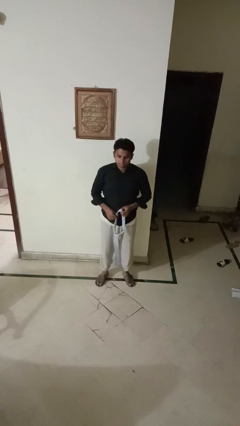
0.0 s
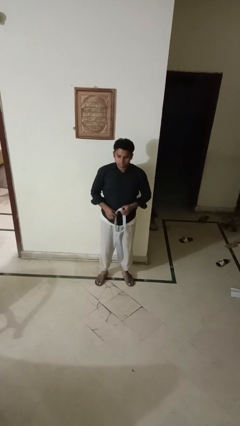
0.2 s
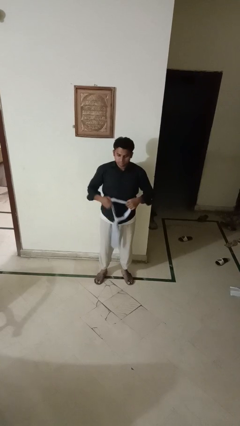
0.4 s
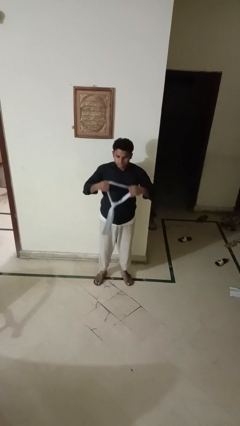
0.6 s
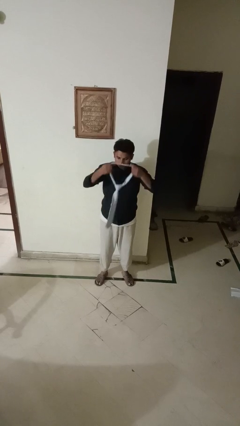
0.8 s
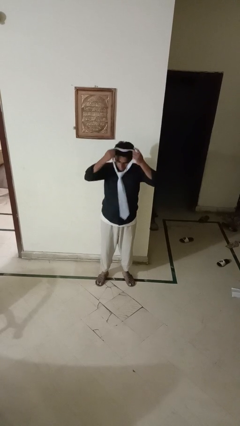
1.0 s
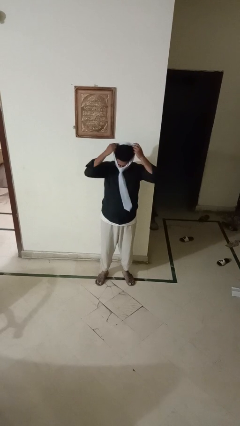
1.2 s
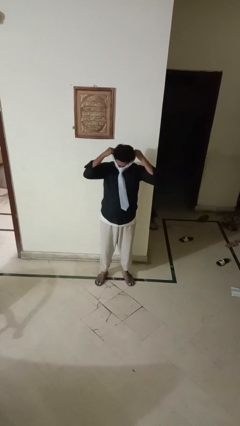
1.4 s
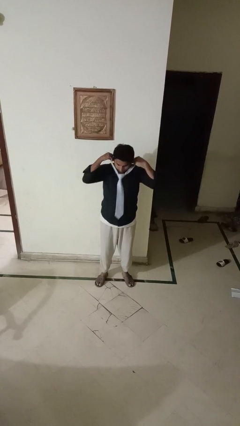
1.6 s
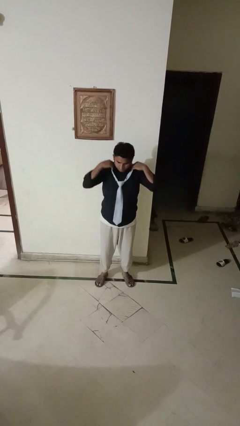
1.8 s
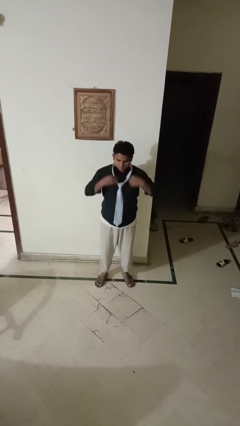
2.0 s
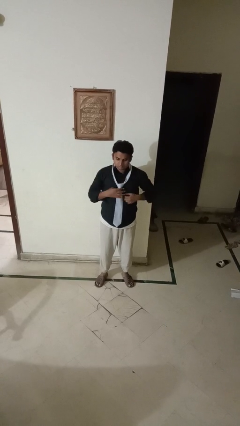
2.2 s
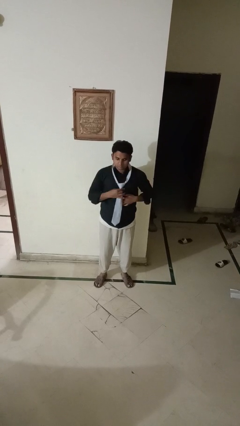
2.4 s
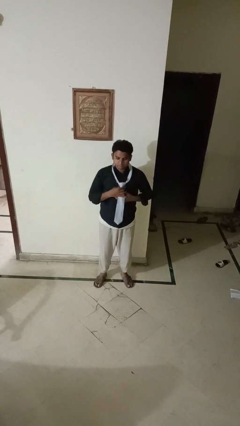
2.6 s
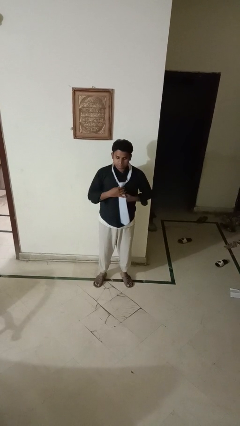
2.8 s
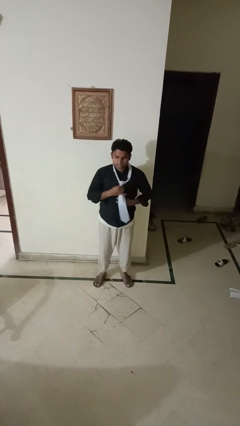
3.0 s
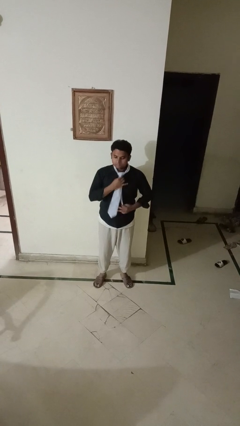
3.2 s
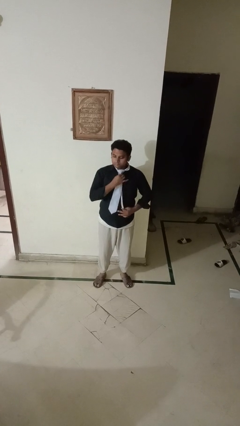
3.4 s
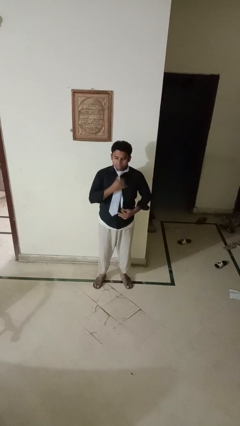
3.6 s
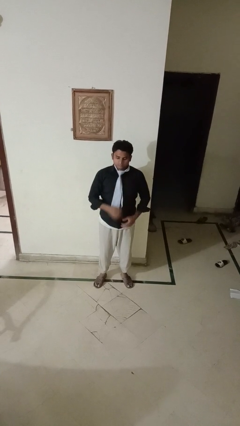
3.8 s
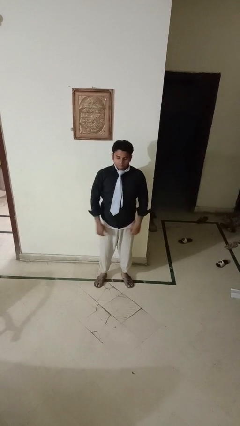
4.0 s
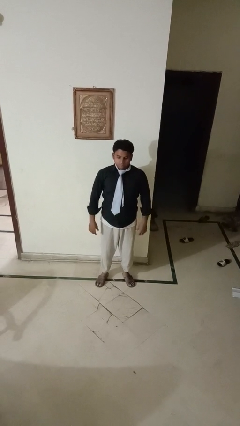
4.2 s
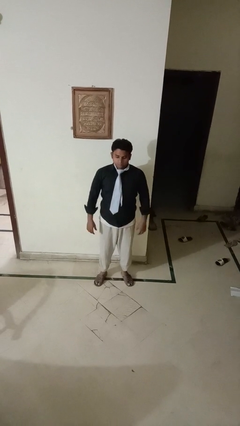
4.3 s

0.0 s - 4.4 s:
person puts on necktie

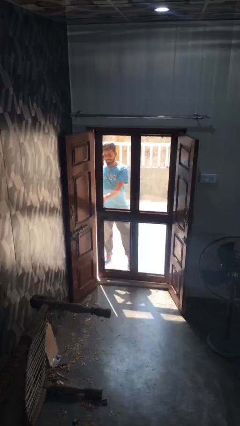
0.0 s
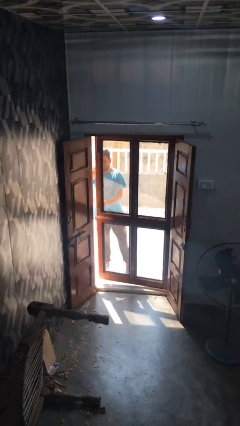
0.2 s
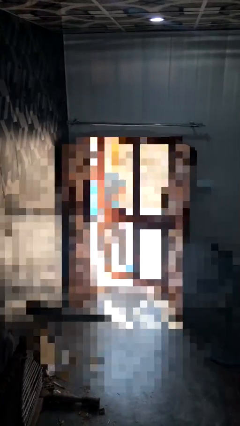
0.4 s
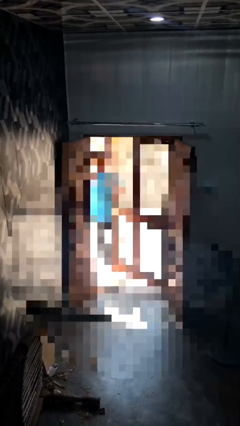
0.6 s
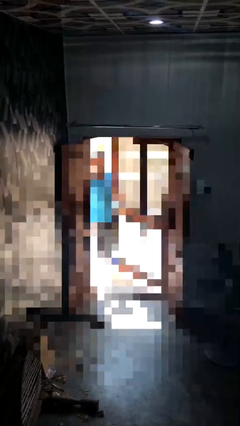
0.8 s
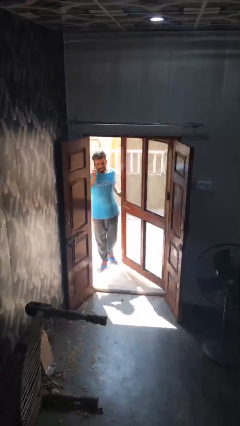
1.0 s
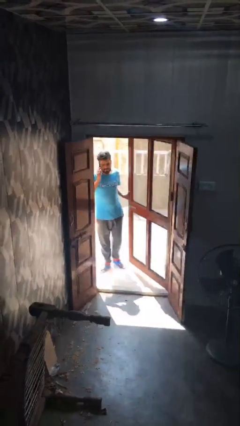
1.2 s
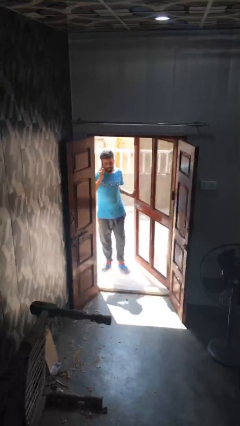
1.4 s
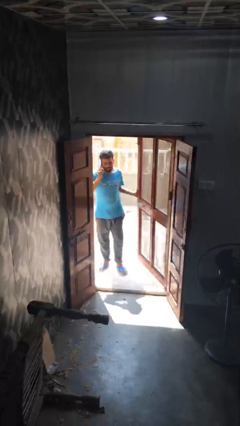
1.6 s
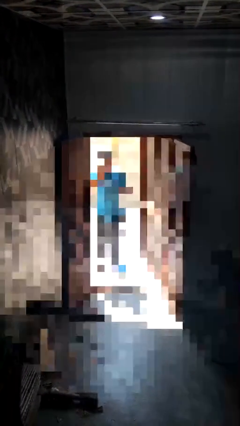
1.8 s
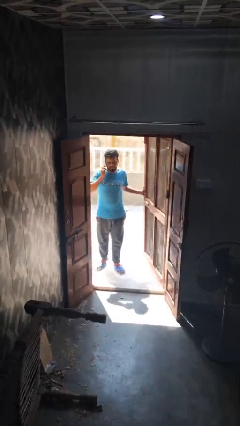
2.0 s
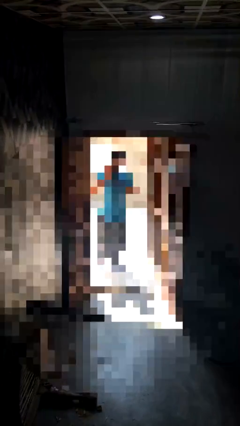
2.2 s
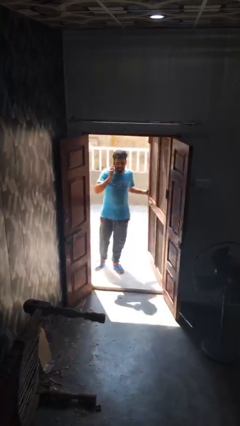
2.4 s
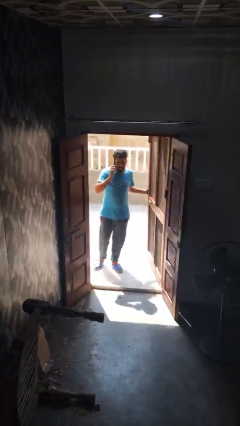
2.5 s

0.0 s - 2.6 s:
person opens facility door

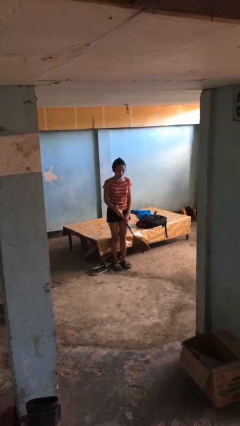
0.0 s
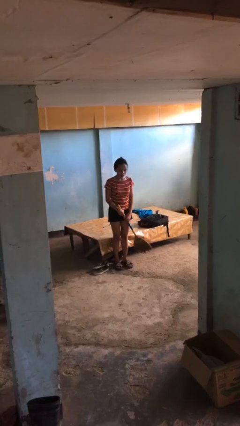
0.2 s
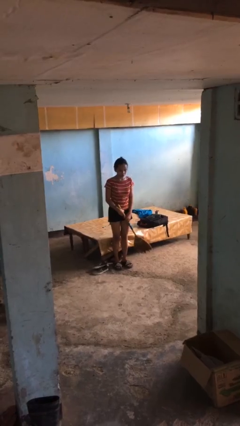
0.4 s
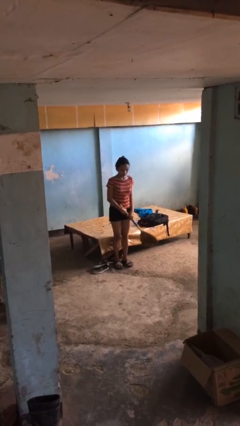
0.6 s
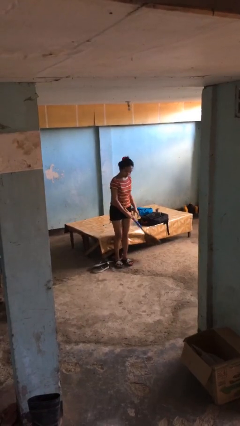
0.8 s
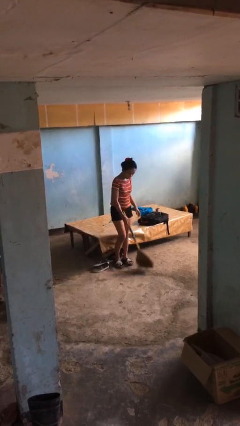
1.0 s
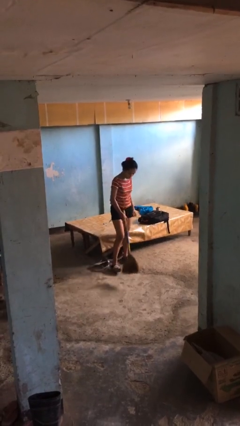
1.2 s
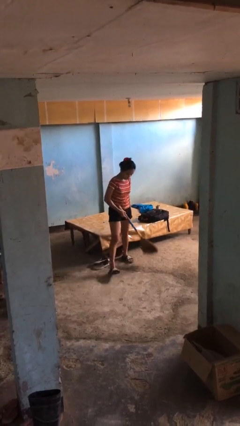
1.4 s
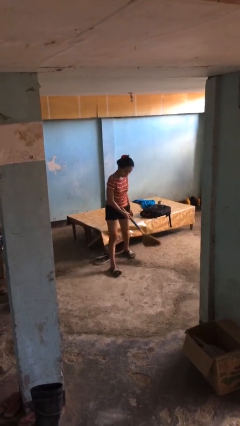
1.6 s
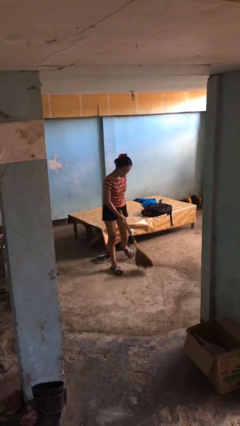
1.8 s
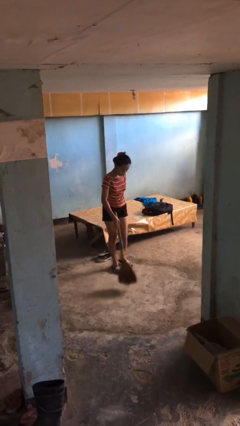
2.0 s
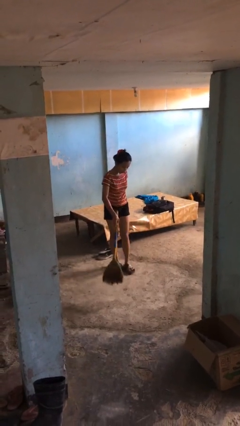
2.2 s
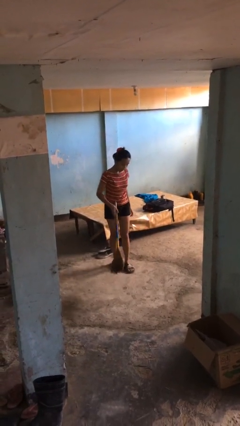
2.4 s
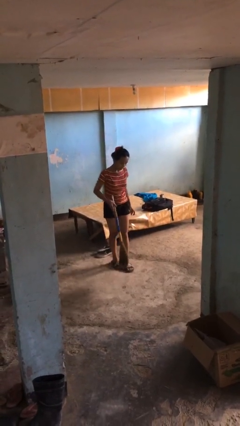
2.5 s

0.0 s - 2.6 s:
person sweeps floor

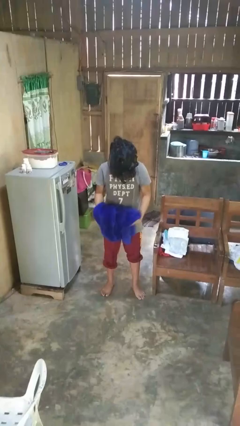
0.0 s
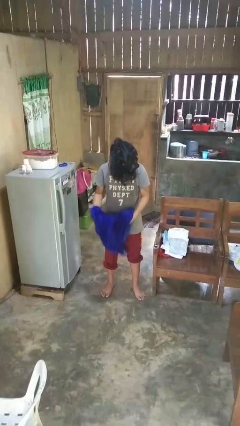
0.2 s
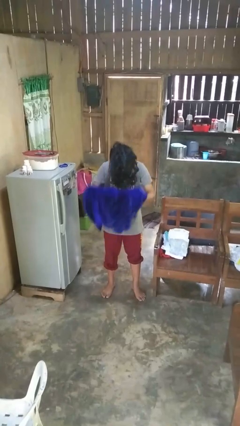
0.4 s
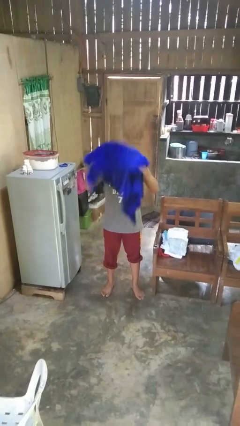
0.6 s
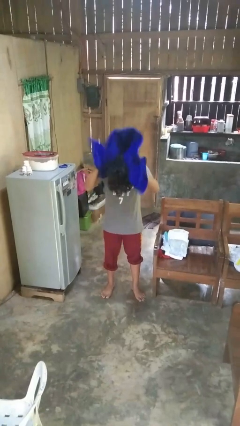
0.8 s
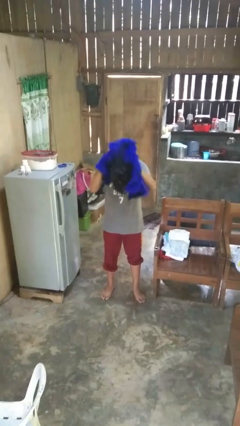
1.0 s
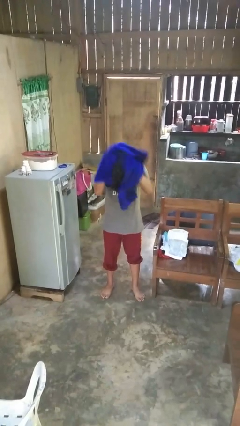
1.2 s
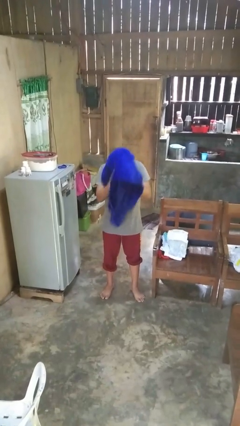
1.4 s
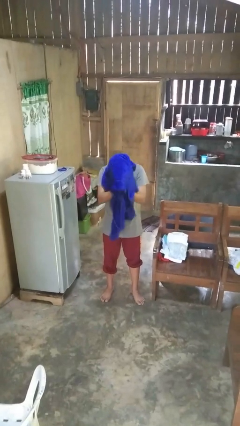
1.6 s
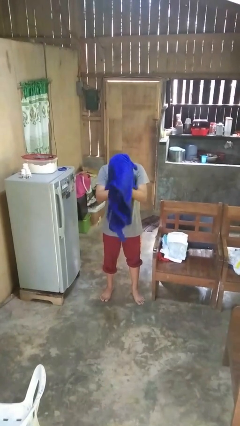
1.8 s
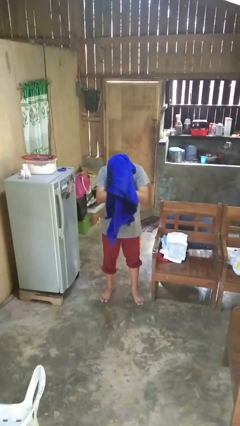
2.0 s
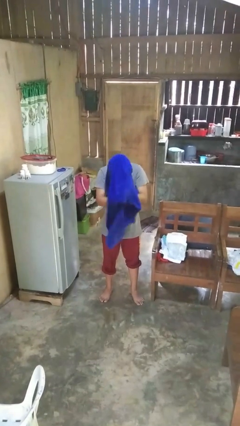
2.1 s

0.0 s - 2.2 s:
person dries hair with towel

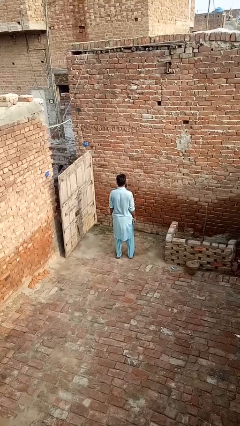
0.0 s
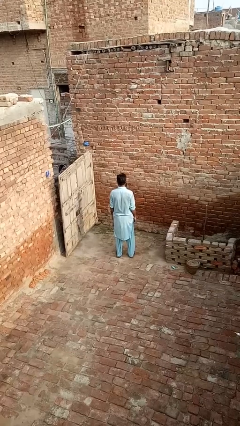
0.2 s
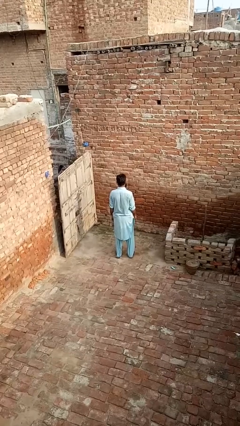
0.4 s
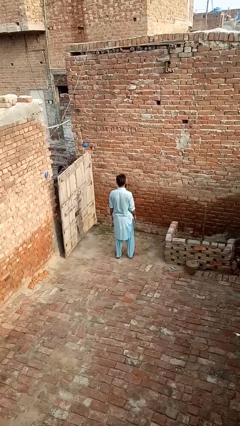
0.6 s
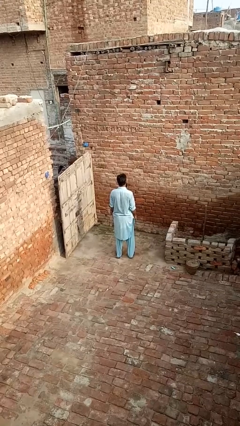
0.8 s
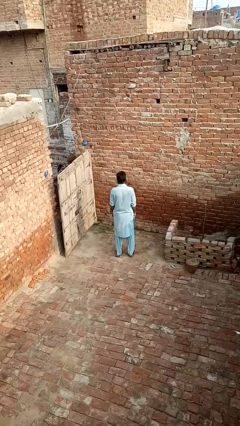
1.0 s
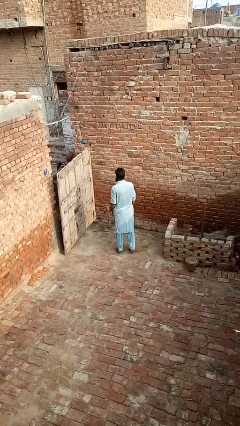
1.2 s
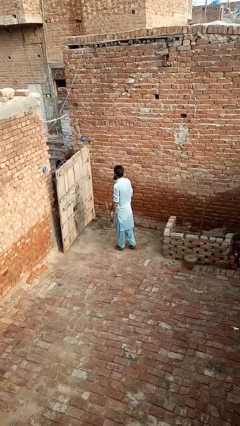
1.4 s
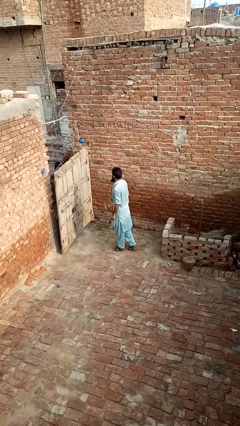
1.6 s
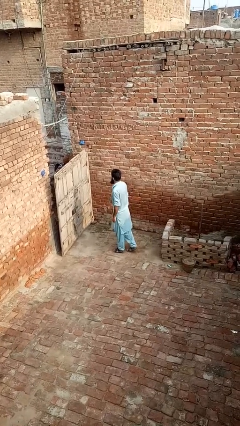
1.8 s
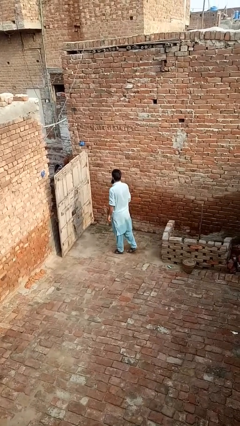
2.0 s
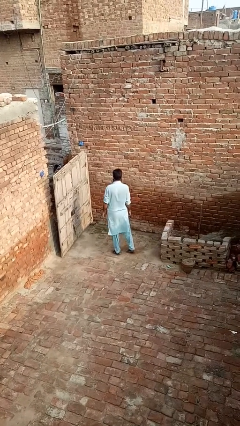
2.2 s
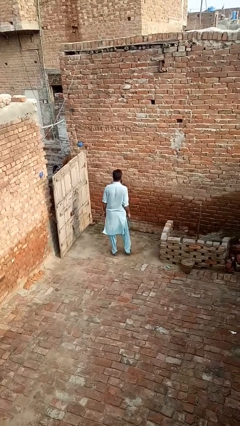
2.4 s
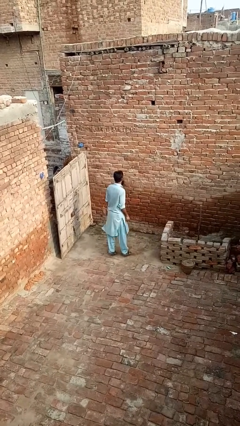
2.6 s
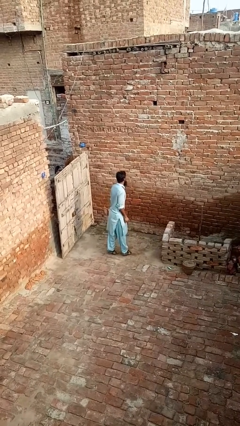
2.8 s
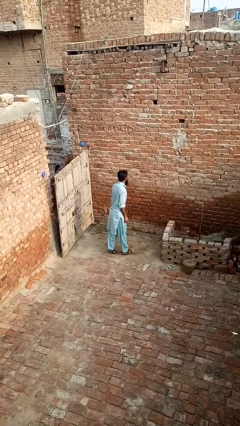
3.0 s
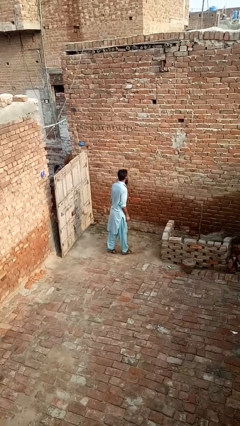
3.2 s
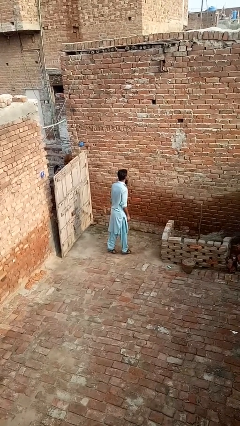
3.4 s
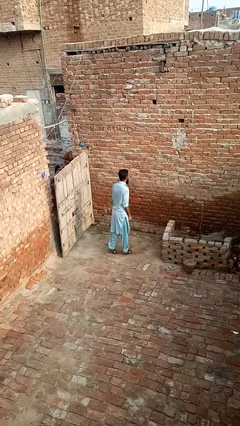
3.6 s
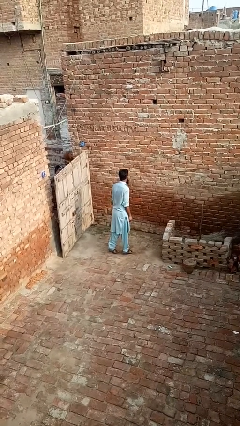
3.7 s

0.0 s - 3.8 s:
person twirls

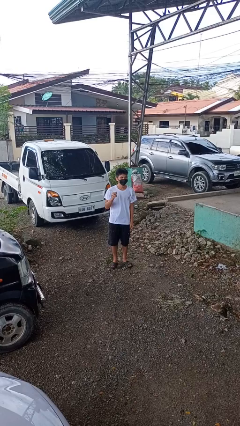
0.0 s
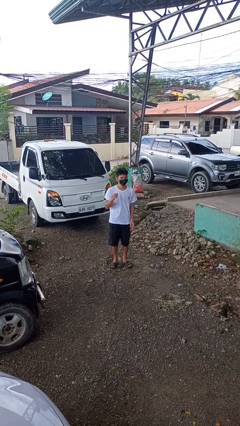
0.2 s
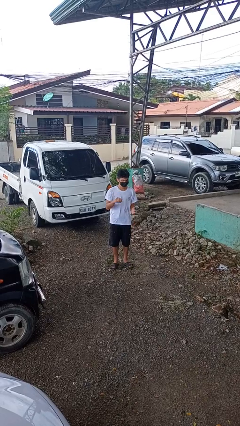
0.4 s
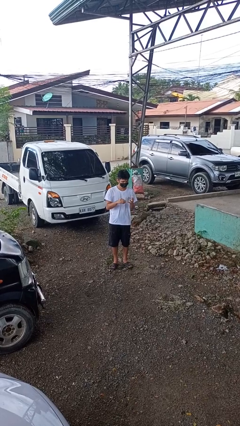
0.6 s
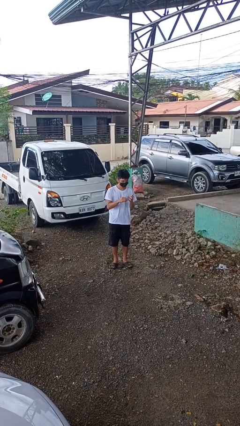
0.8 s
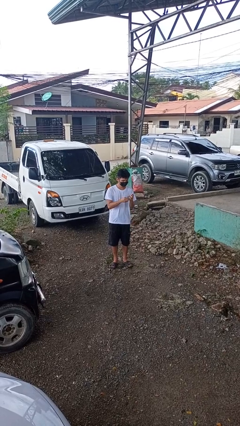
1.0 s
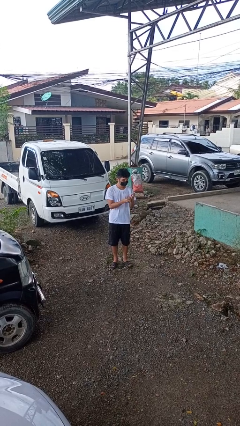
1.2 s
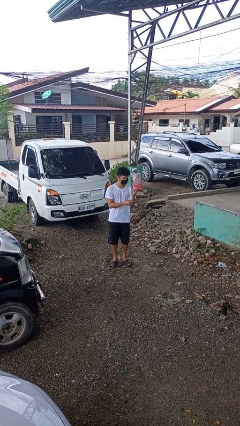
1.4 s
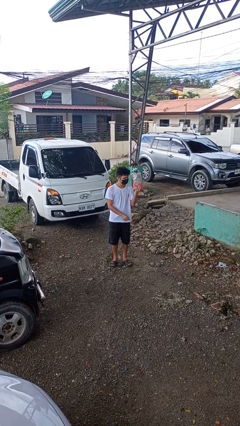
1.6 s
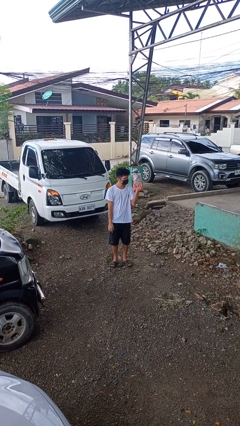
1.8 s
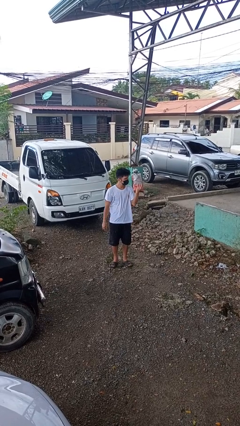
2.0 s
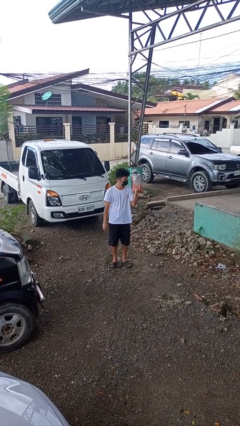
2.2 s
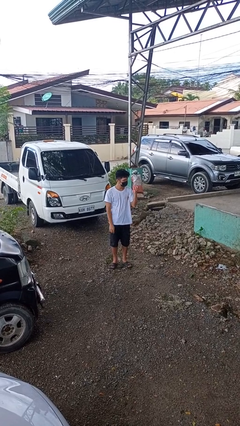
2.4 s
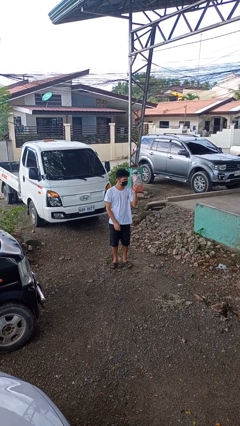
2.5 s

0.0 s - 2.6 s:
person puts on ring
